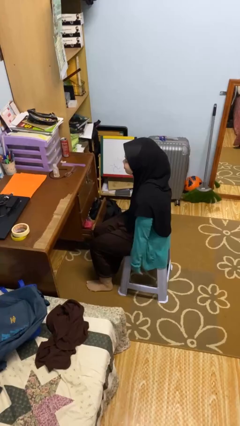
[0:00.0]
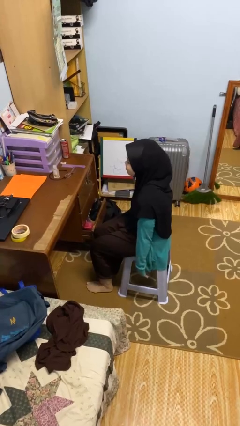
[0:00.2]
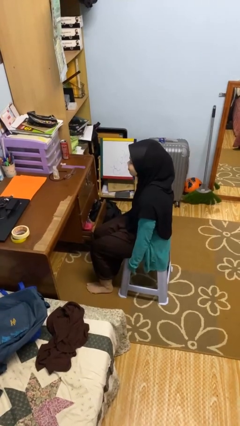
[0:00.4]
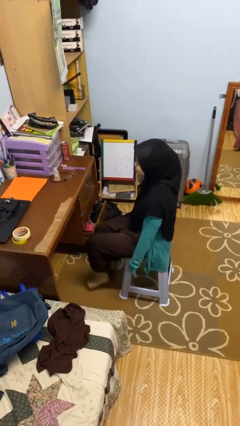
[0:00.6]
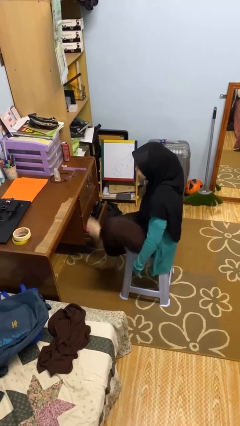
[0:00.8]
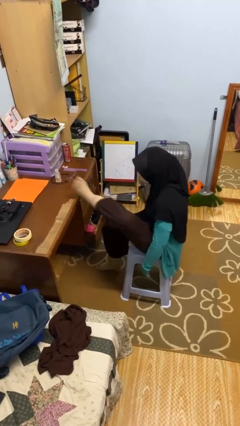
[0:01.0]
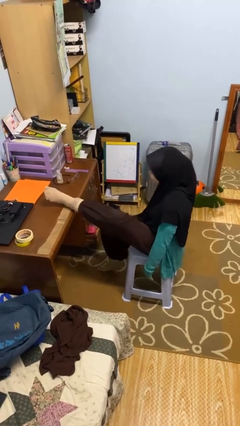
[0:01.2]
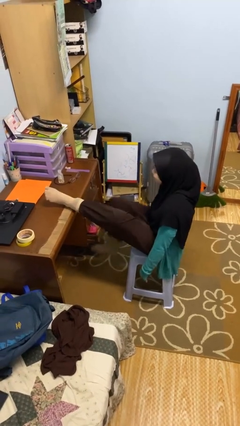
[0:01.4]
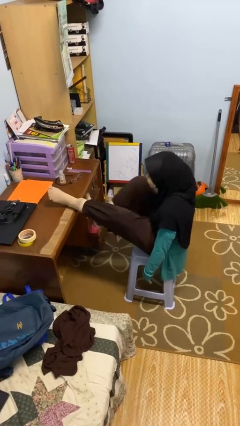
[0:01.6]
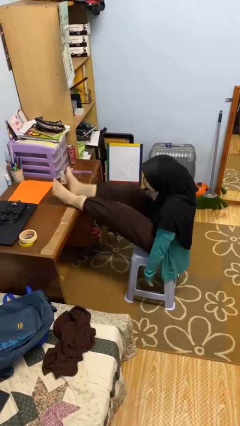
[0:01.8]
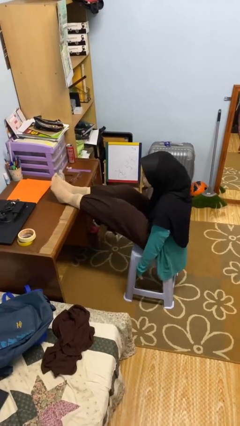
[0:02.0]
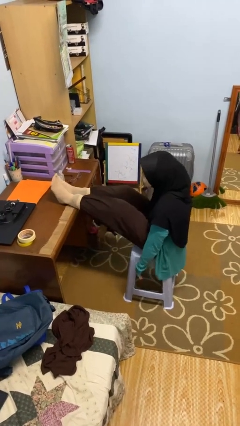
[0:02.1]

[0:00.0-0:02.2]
person puts feet up

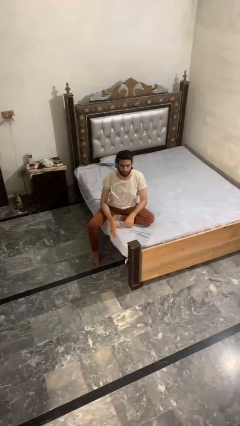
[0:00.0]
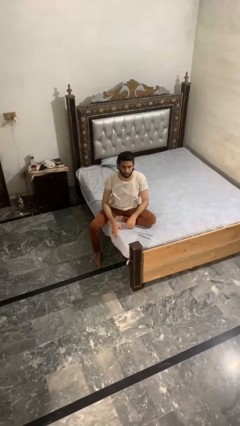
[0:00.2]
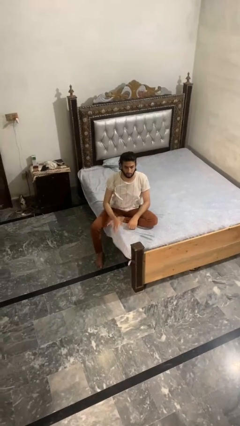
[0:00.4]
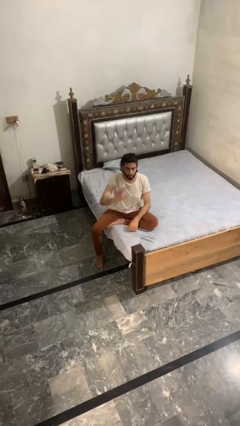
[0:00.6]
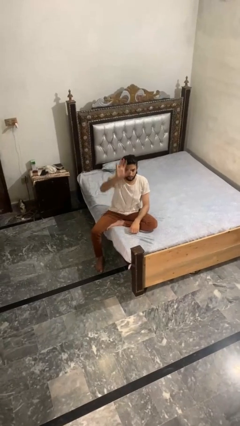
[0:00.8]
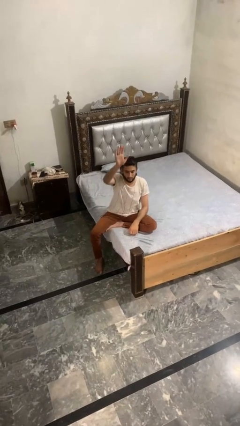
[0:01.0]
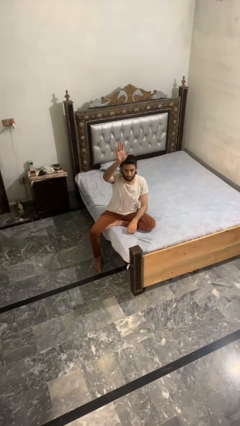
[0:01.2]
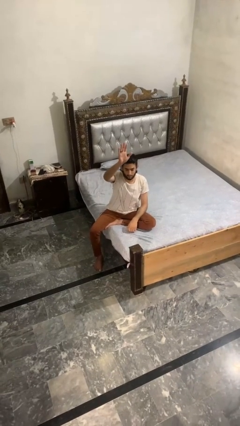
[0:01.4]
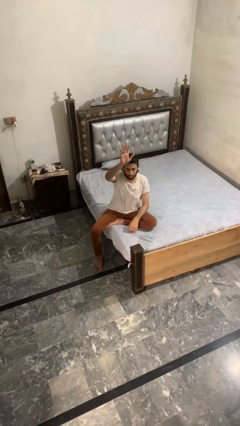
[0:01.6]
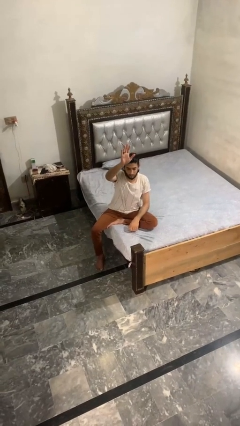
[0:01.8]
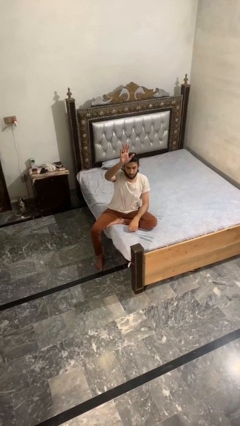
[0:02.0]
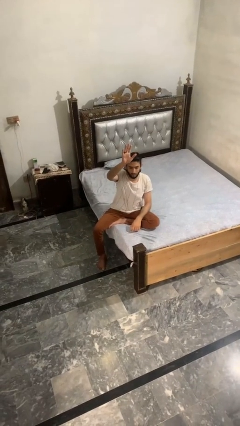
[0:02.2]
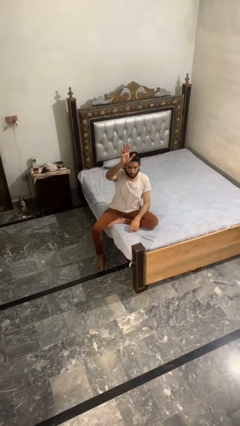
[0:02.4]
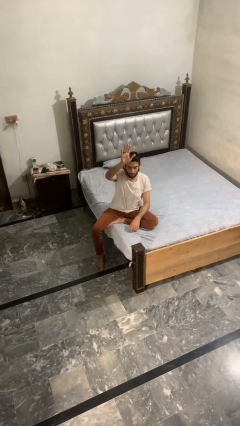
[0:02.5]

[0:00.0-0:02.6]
person gestures raise hand

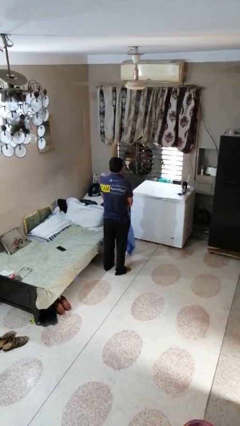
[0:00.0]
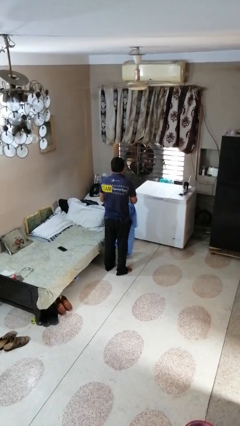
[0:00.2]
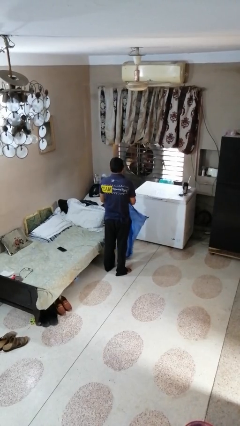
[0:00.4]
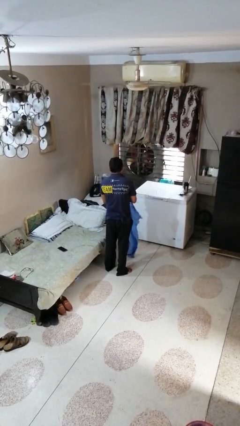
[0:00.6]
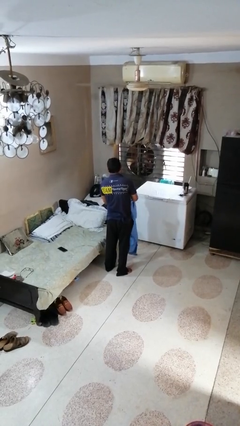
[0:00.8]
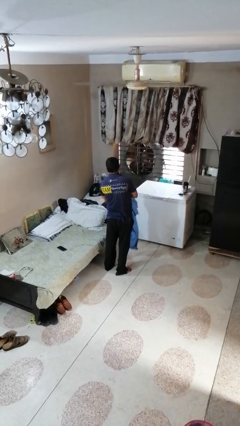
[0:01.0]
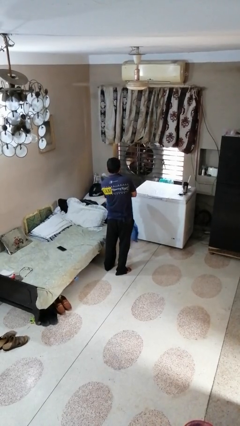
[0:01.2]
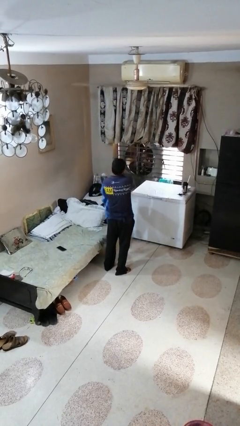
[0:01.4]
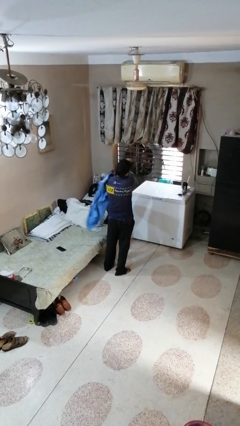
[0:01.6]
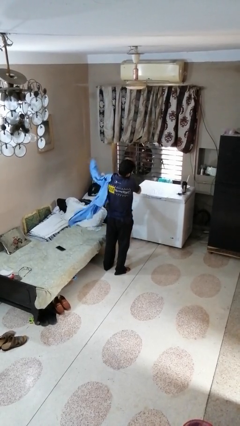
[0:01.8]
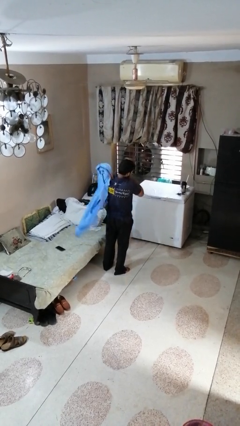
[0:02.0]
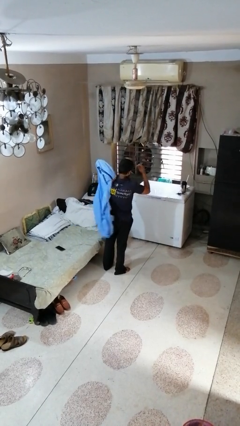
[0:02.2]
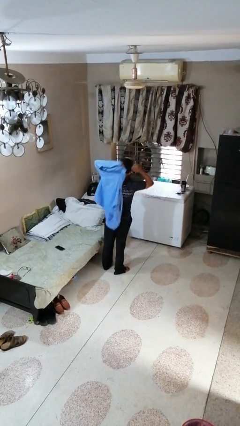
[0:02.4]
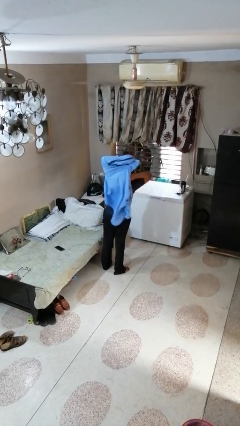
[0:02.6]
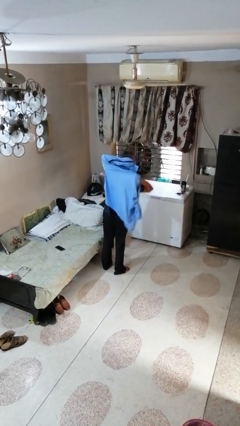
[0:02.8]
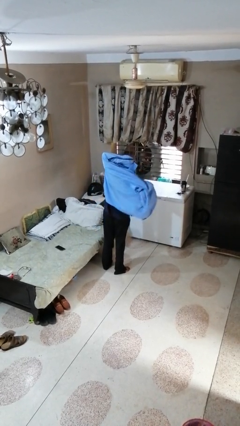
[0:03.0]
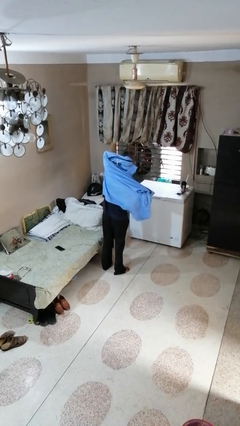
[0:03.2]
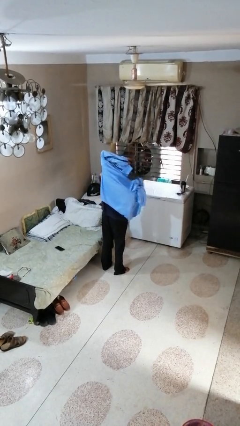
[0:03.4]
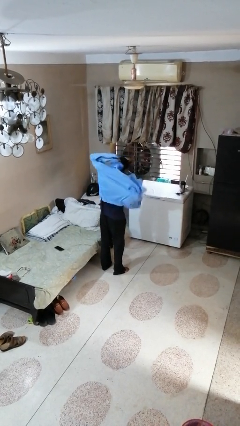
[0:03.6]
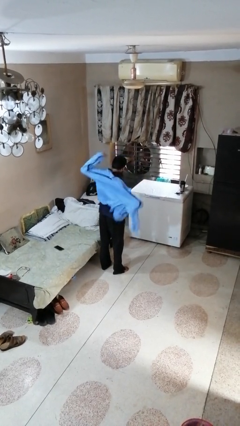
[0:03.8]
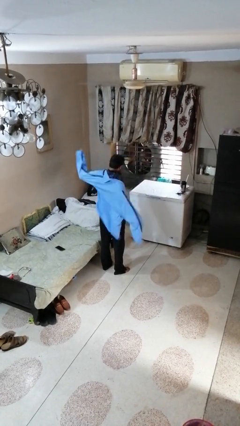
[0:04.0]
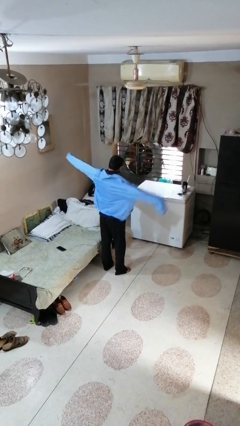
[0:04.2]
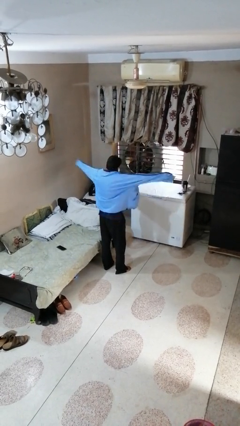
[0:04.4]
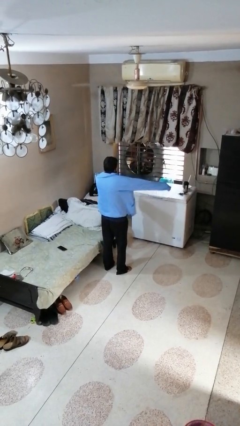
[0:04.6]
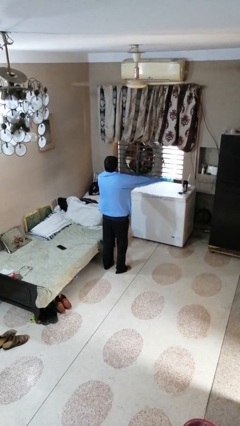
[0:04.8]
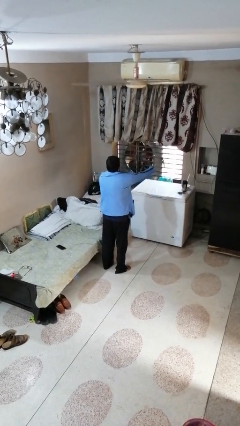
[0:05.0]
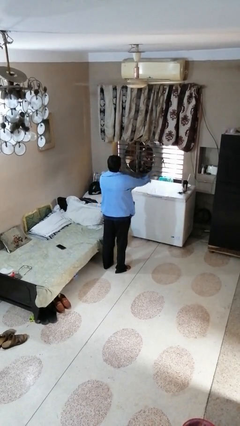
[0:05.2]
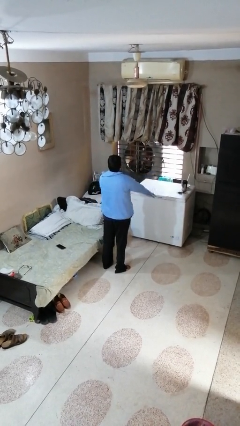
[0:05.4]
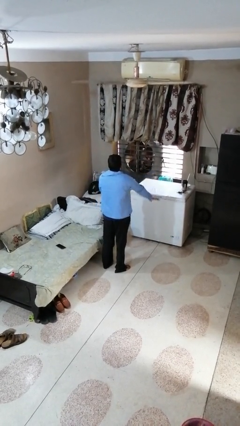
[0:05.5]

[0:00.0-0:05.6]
person puts on jacket

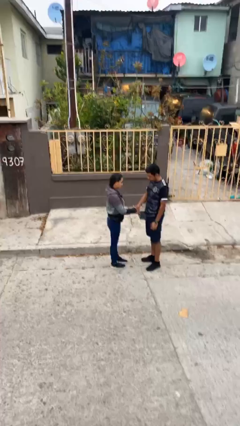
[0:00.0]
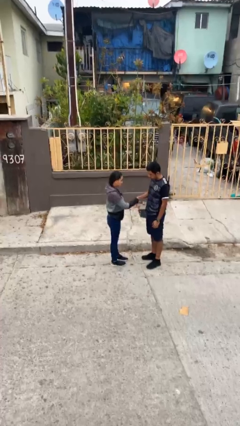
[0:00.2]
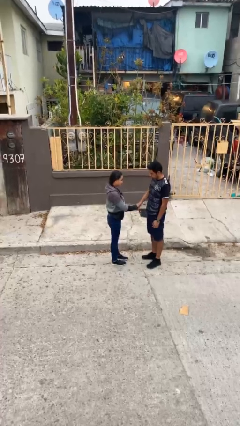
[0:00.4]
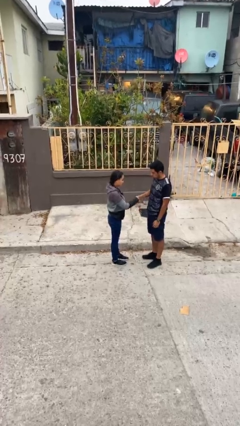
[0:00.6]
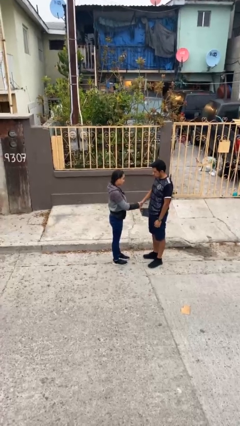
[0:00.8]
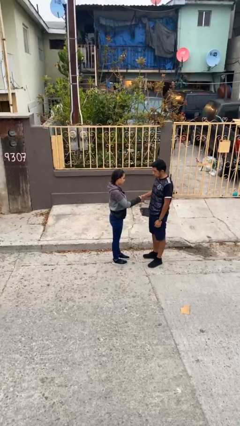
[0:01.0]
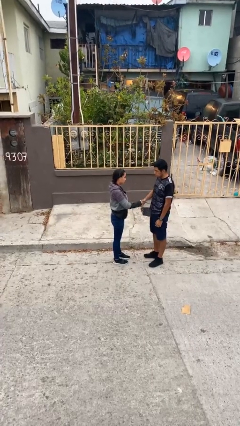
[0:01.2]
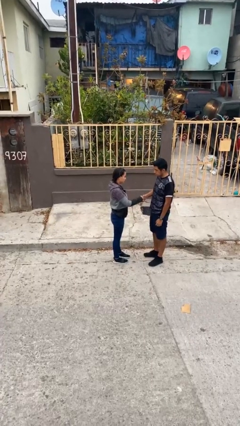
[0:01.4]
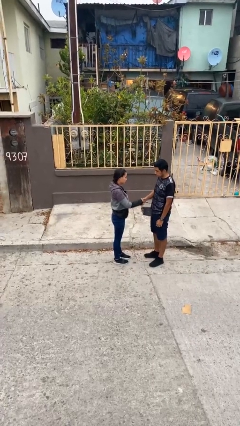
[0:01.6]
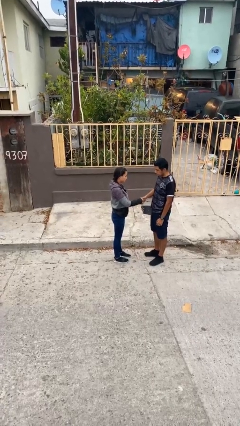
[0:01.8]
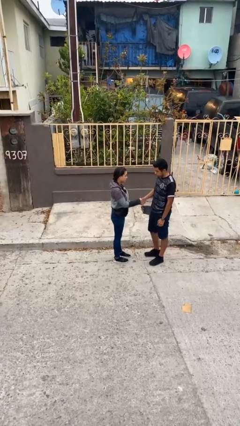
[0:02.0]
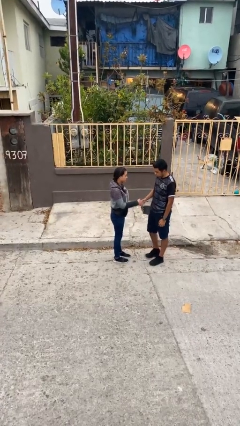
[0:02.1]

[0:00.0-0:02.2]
person shakes hand

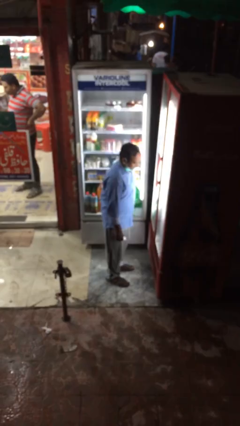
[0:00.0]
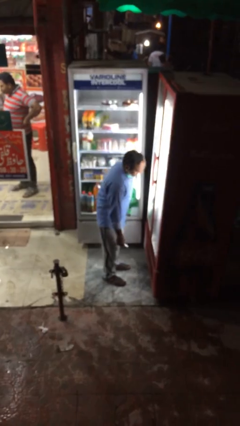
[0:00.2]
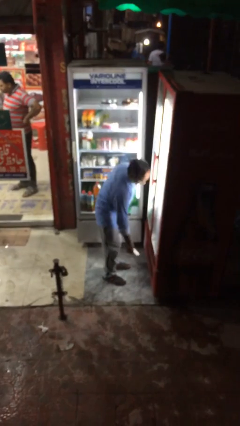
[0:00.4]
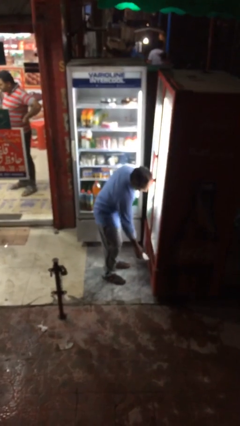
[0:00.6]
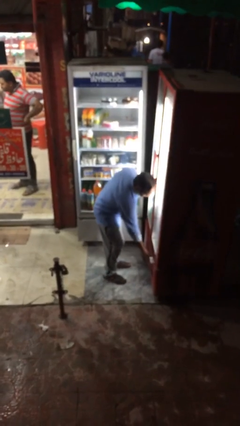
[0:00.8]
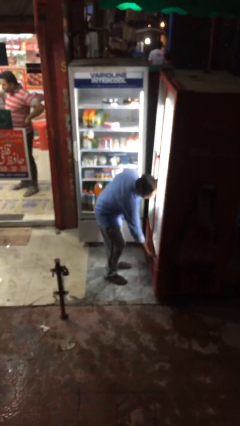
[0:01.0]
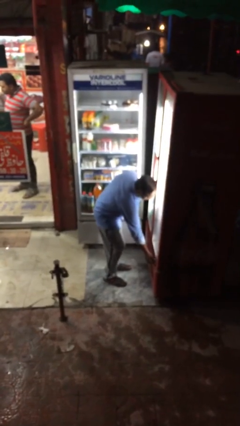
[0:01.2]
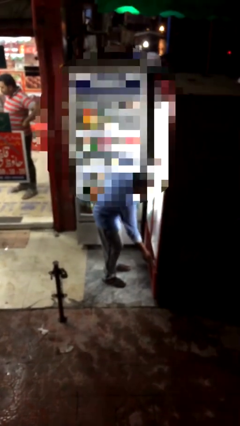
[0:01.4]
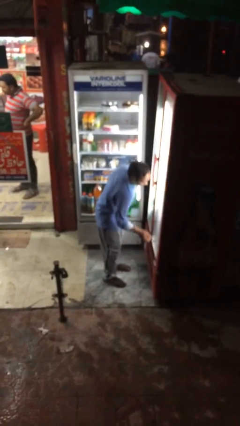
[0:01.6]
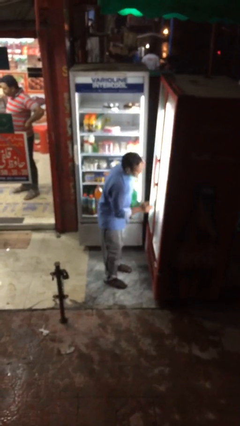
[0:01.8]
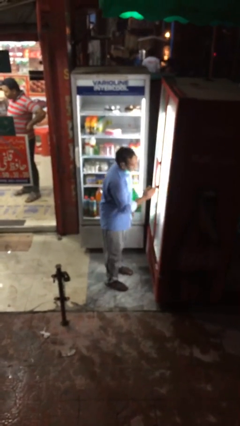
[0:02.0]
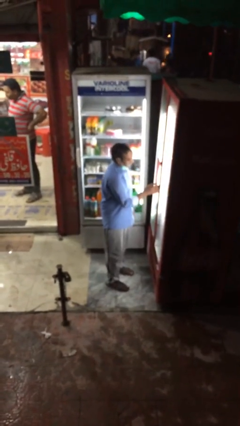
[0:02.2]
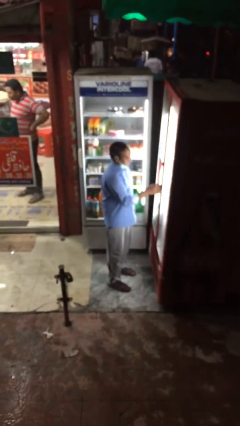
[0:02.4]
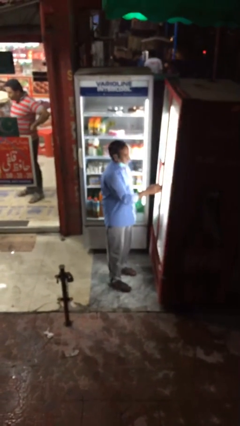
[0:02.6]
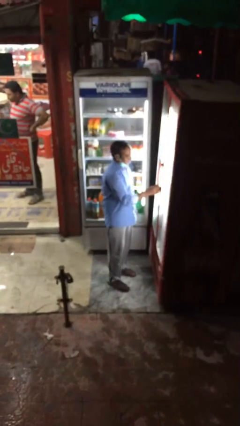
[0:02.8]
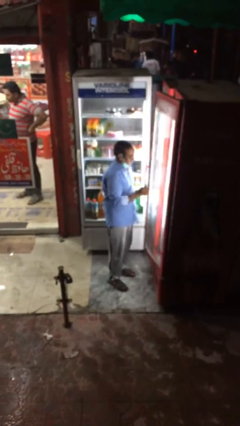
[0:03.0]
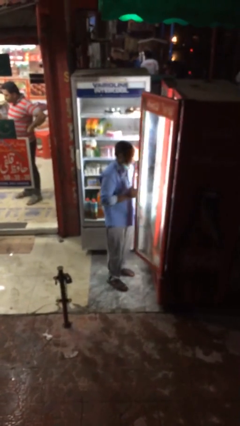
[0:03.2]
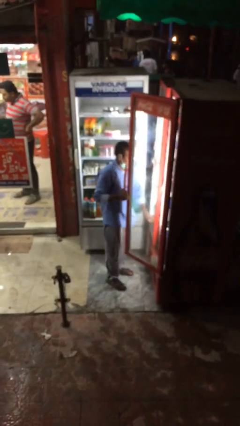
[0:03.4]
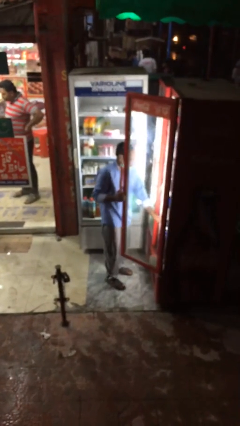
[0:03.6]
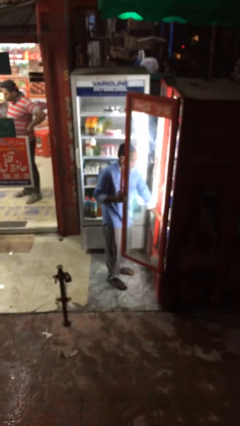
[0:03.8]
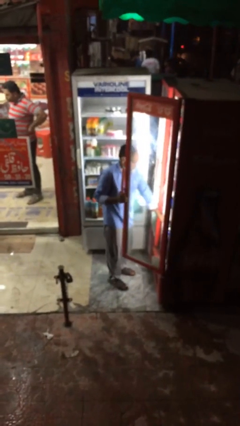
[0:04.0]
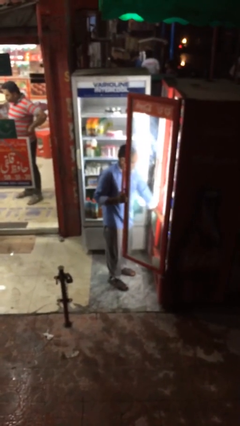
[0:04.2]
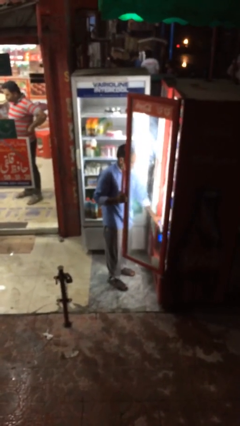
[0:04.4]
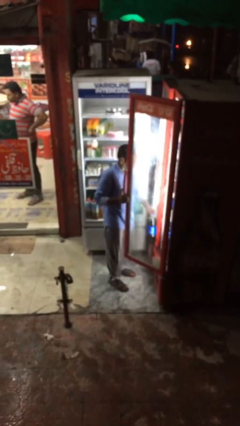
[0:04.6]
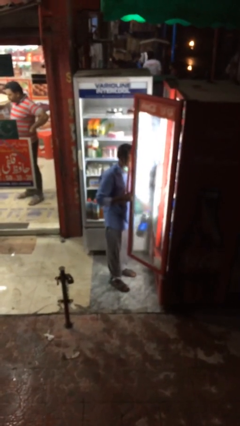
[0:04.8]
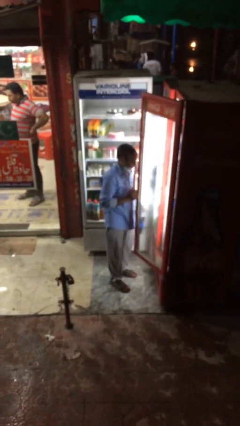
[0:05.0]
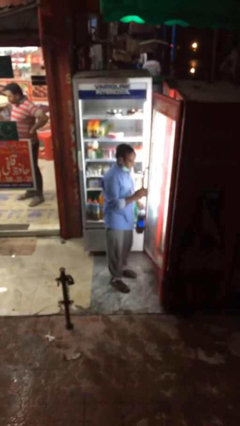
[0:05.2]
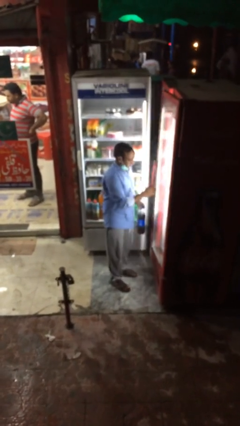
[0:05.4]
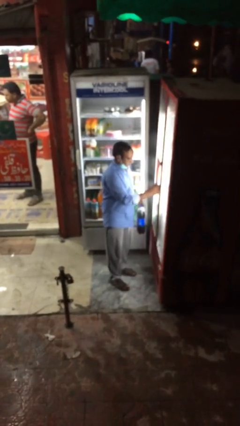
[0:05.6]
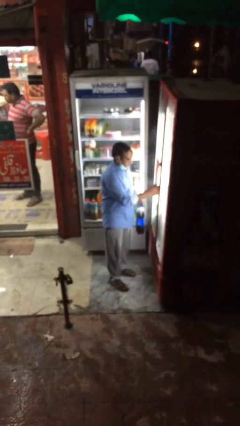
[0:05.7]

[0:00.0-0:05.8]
person purchases from machine
